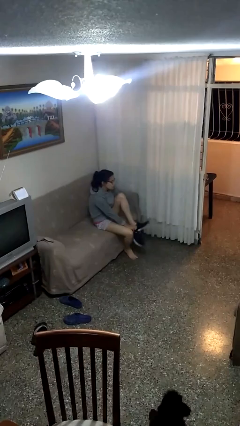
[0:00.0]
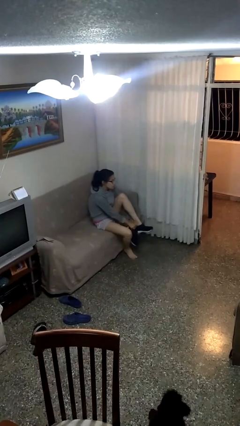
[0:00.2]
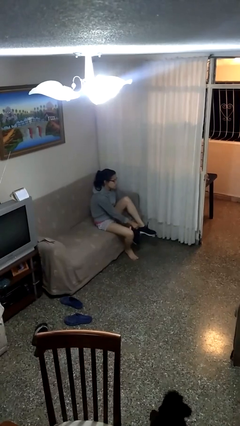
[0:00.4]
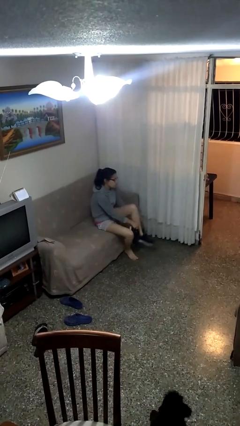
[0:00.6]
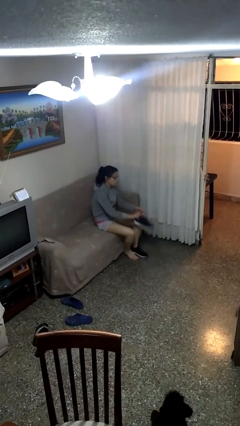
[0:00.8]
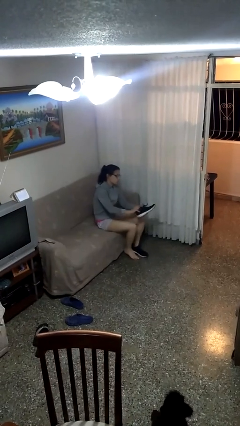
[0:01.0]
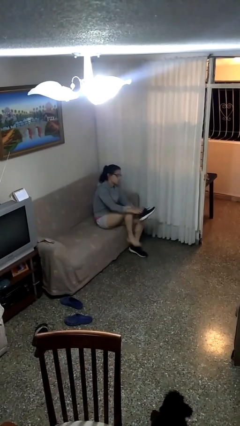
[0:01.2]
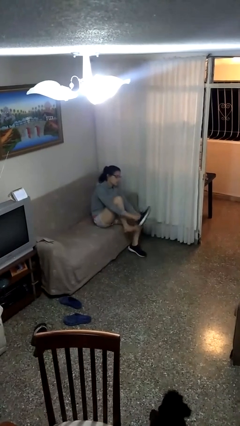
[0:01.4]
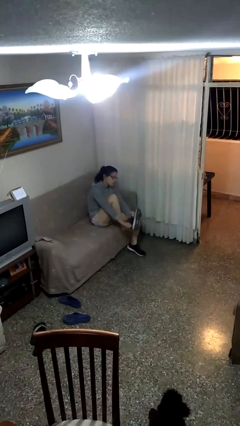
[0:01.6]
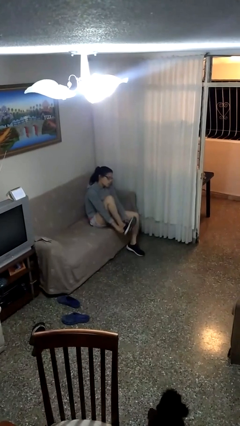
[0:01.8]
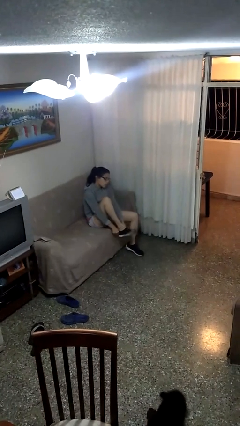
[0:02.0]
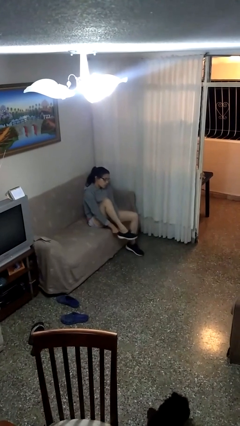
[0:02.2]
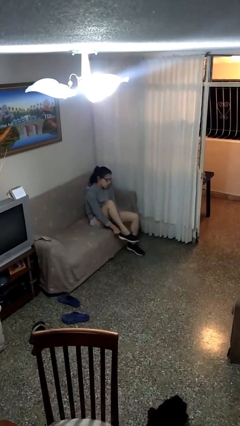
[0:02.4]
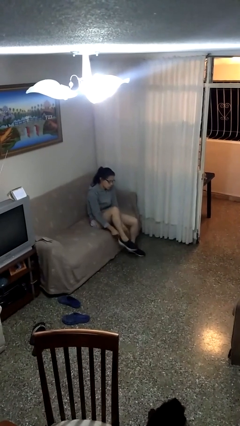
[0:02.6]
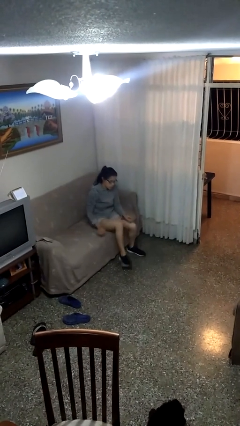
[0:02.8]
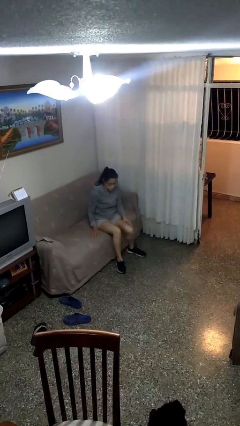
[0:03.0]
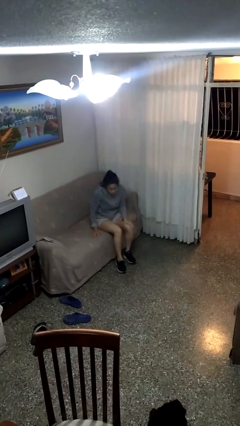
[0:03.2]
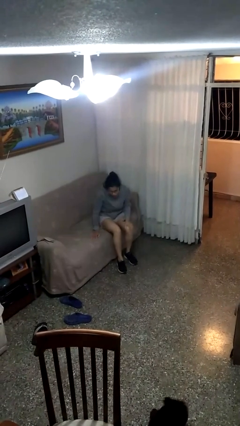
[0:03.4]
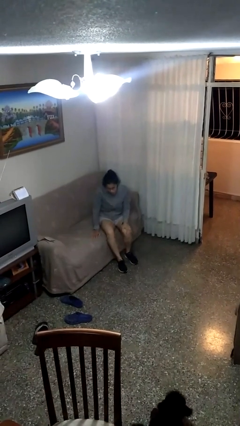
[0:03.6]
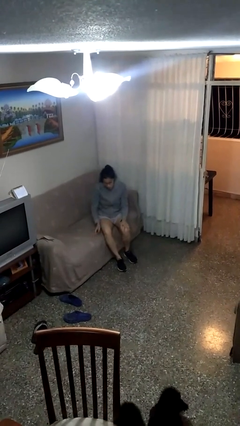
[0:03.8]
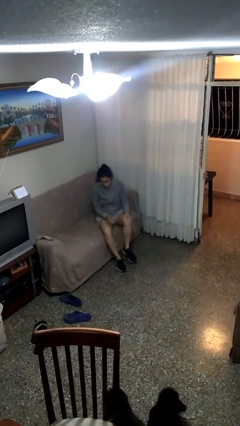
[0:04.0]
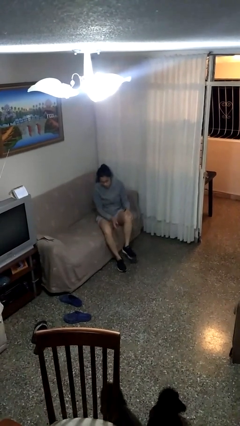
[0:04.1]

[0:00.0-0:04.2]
person puts on shoes

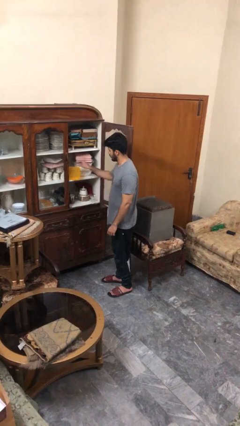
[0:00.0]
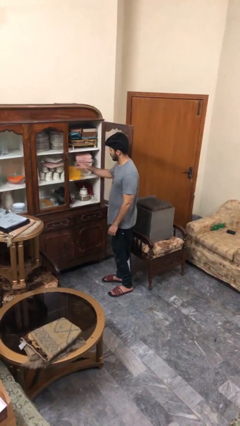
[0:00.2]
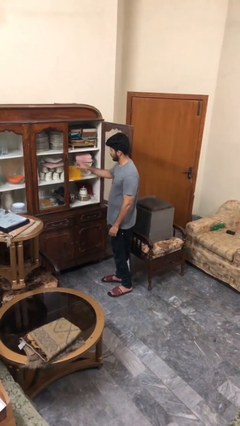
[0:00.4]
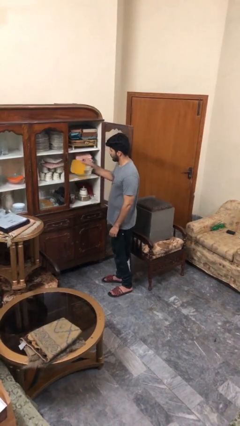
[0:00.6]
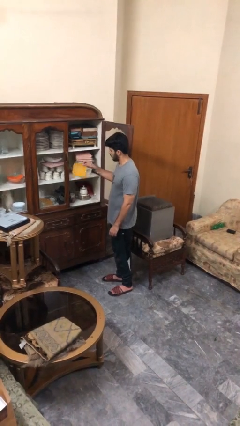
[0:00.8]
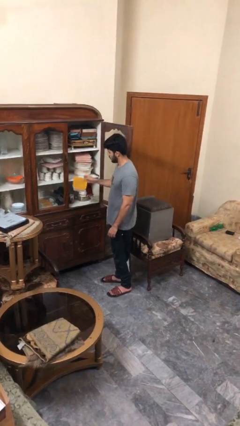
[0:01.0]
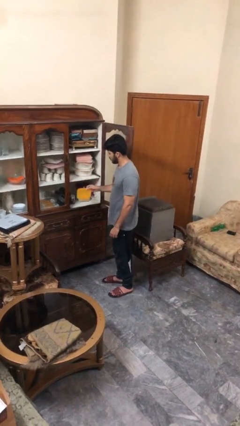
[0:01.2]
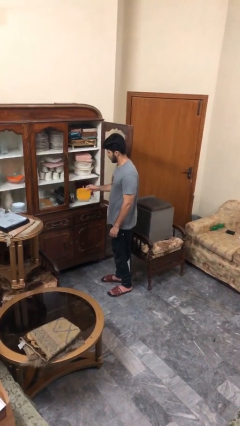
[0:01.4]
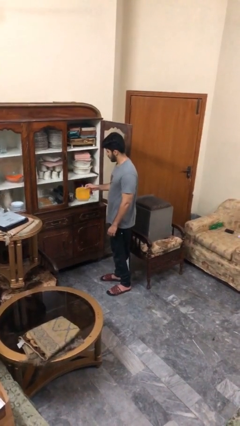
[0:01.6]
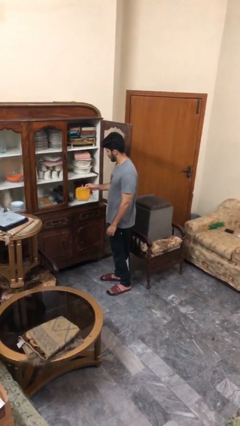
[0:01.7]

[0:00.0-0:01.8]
person picks up object from cabinet

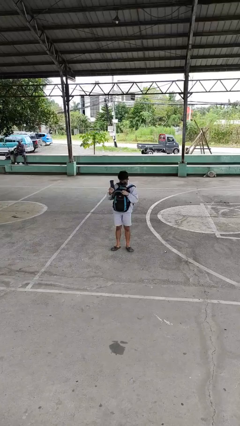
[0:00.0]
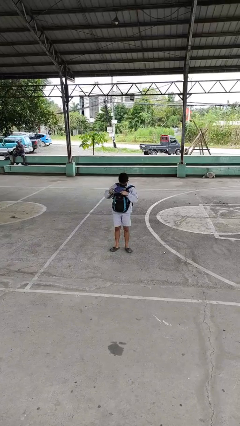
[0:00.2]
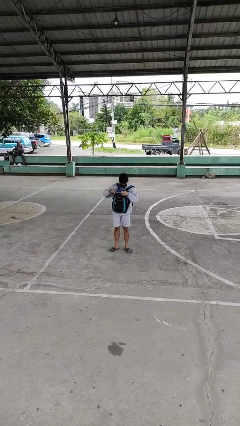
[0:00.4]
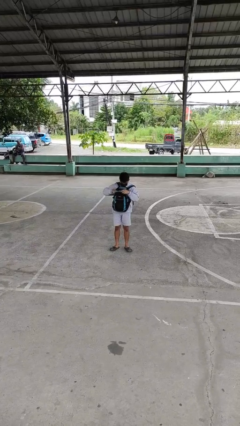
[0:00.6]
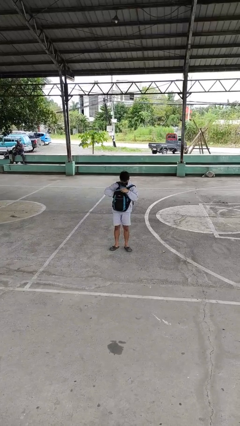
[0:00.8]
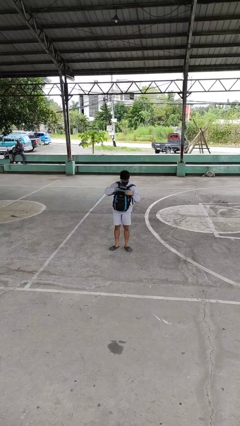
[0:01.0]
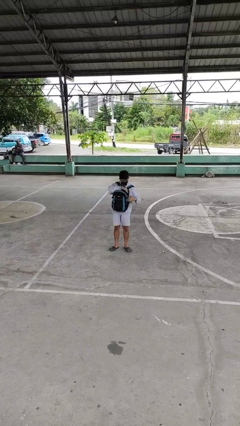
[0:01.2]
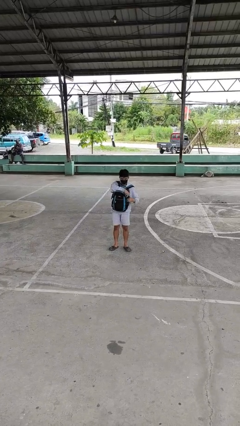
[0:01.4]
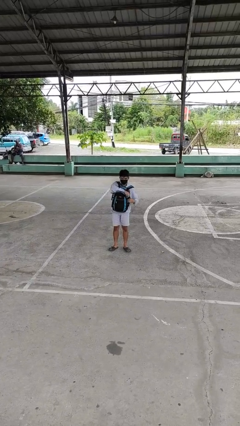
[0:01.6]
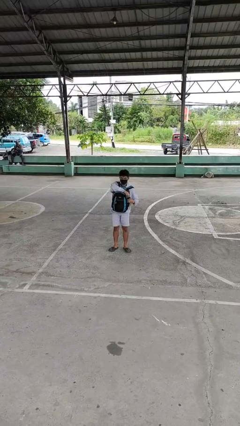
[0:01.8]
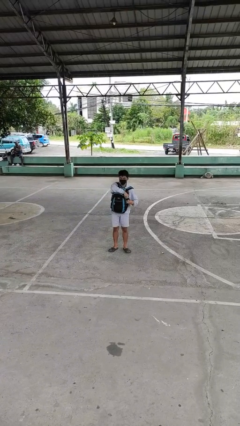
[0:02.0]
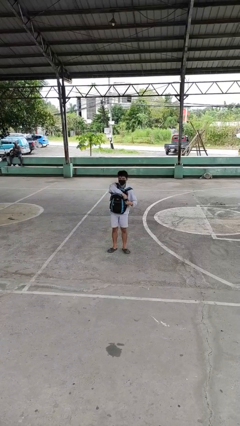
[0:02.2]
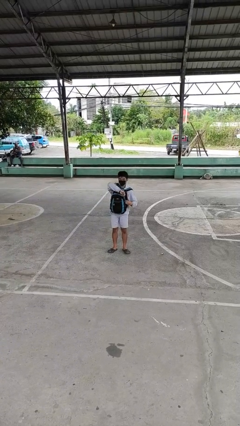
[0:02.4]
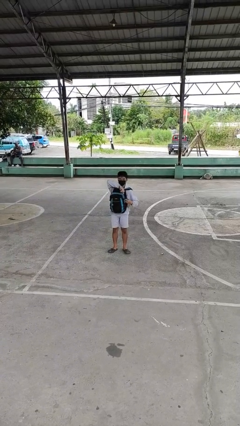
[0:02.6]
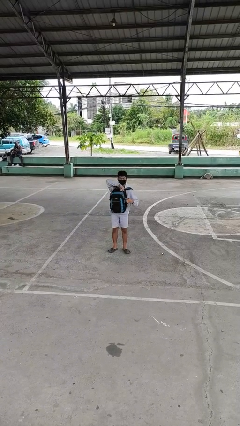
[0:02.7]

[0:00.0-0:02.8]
person puts object into backpack

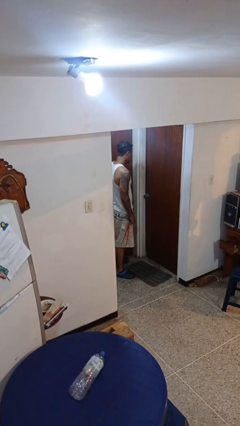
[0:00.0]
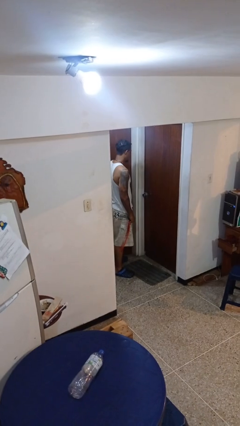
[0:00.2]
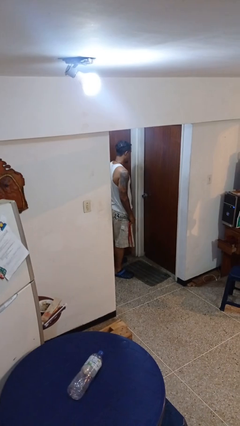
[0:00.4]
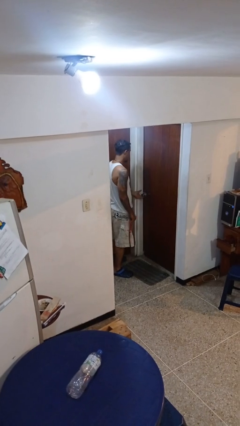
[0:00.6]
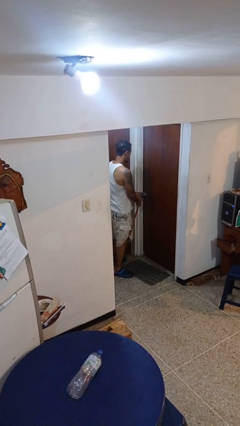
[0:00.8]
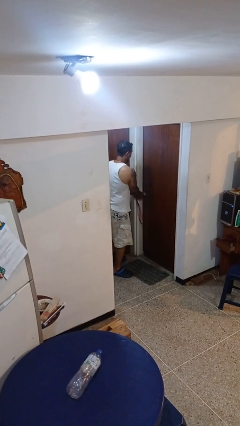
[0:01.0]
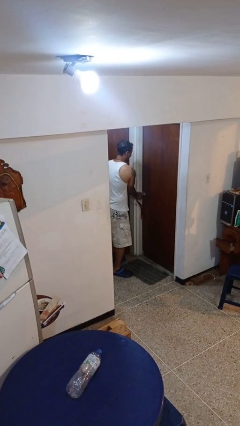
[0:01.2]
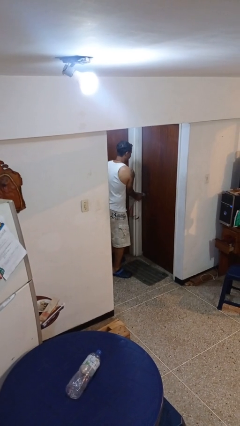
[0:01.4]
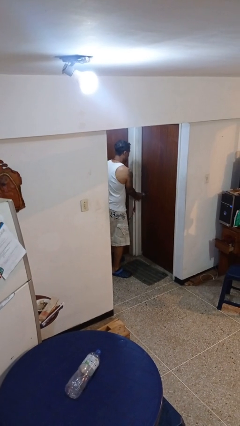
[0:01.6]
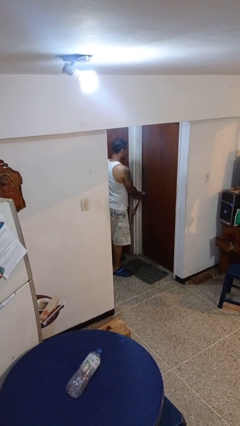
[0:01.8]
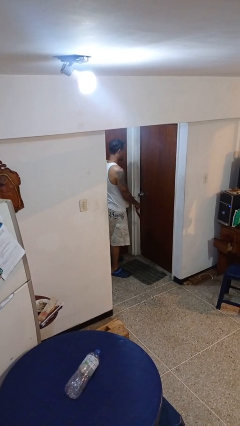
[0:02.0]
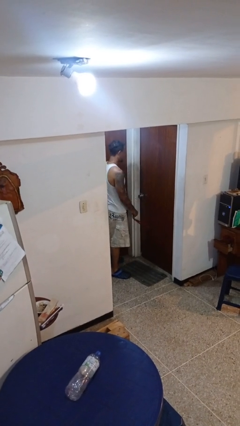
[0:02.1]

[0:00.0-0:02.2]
person unlocks door with keys

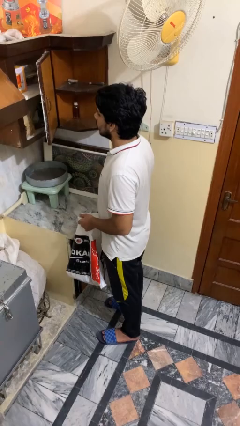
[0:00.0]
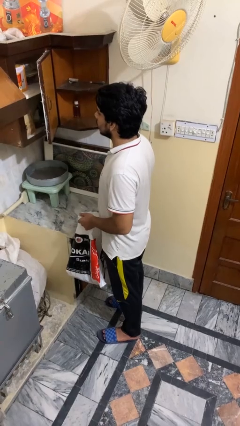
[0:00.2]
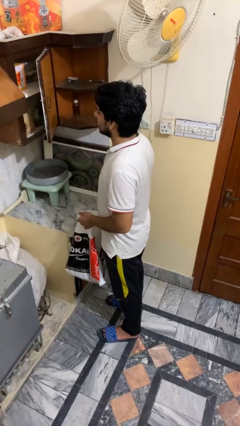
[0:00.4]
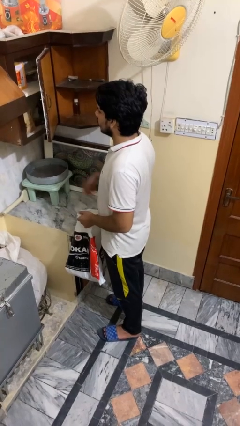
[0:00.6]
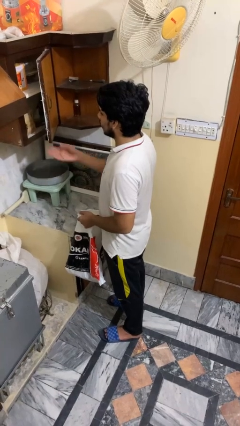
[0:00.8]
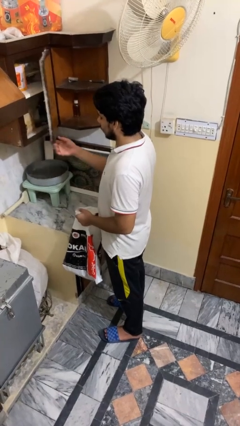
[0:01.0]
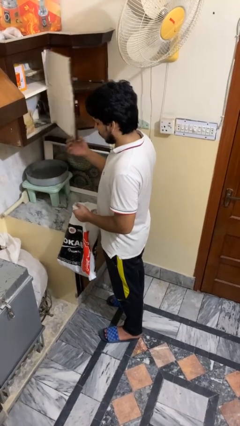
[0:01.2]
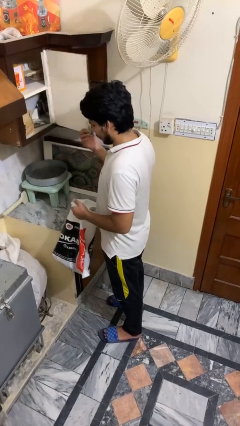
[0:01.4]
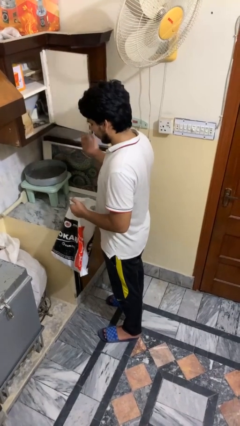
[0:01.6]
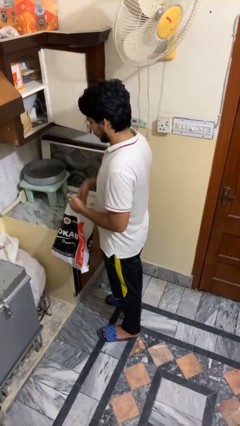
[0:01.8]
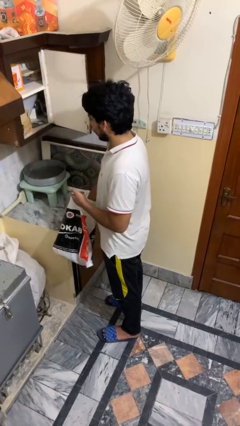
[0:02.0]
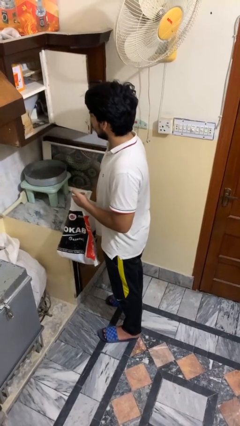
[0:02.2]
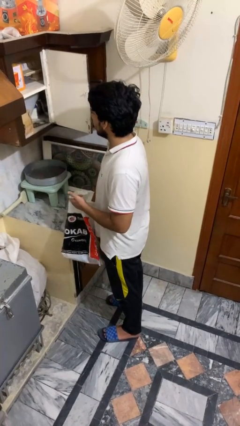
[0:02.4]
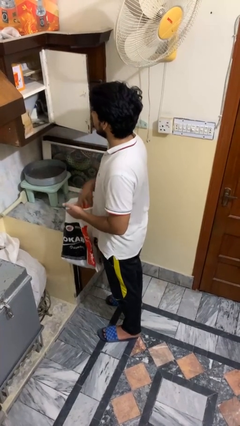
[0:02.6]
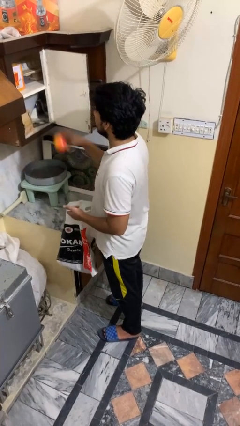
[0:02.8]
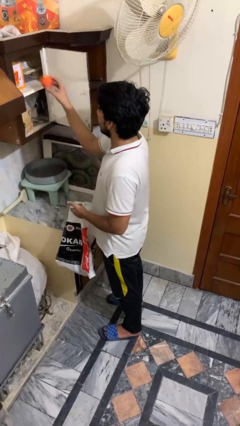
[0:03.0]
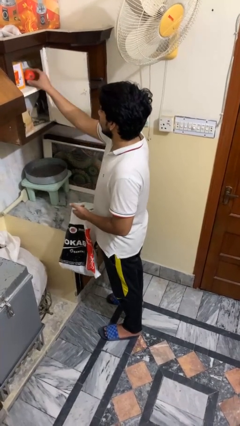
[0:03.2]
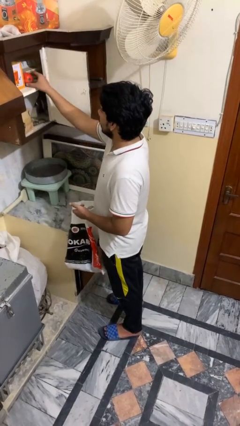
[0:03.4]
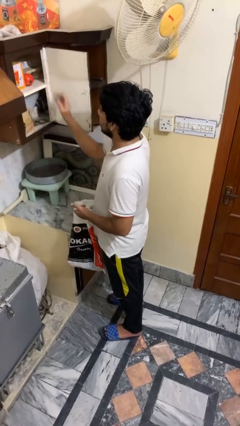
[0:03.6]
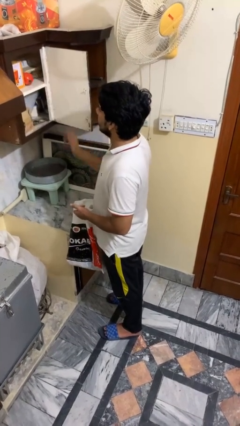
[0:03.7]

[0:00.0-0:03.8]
person loads groceries into cabinet

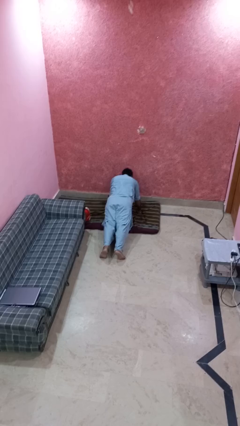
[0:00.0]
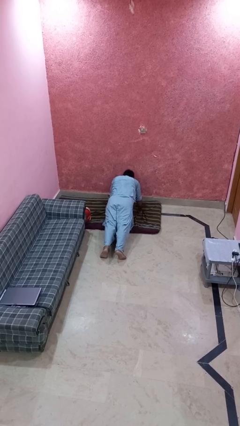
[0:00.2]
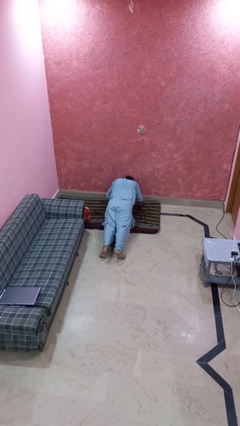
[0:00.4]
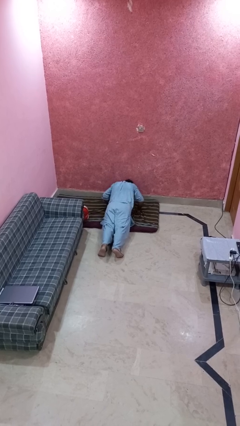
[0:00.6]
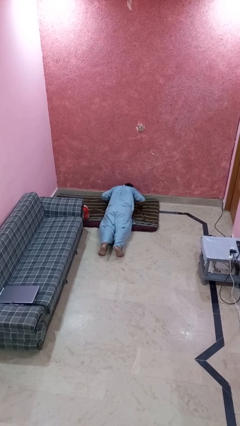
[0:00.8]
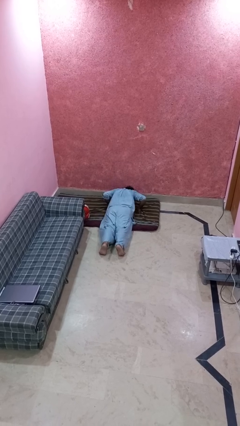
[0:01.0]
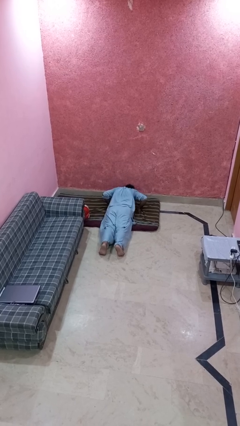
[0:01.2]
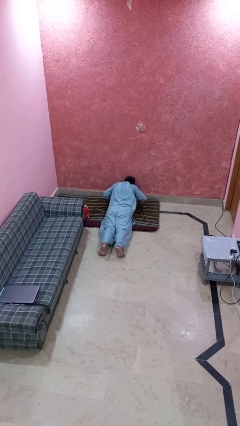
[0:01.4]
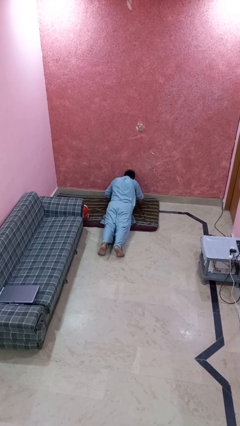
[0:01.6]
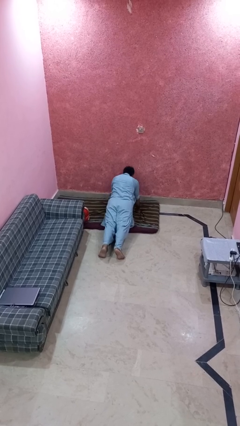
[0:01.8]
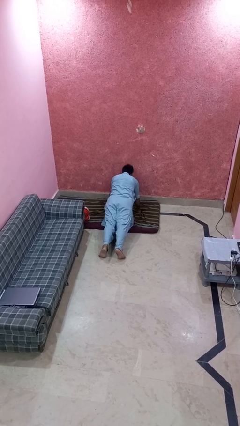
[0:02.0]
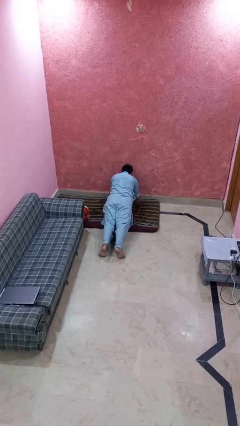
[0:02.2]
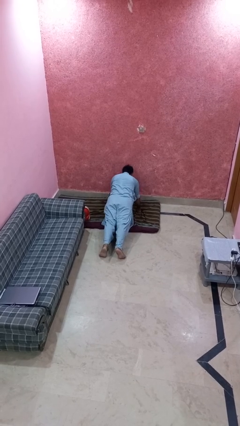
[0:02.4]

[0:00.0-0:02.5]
person exercises with pushup

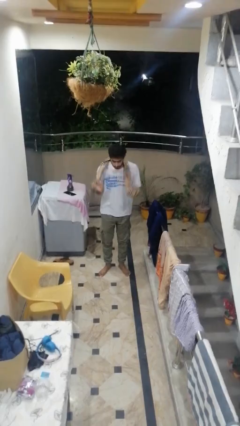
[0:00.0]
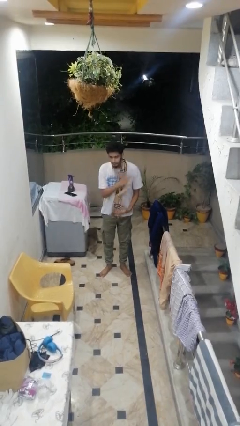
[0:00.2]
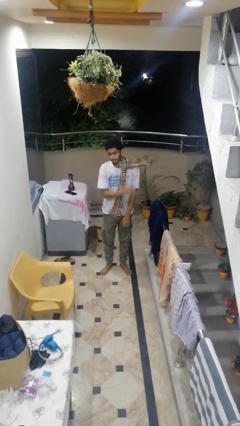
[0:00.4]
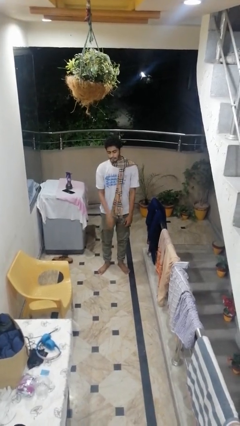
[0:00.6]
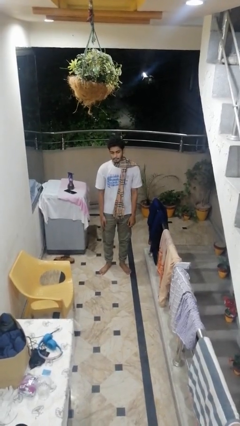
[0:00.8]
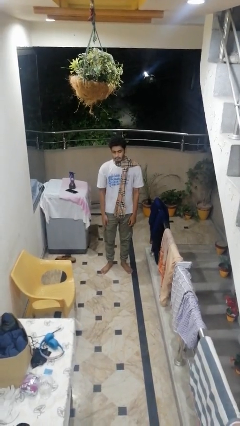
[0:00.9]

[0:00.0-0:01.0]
person puts on scarf
